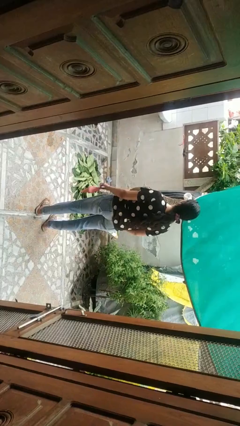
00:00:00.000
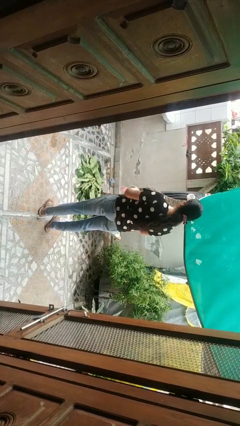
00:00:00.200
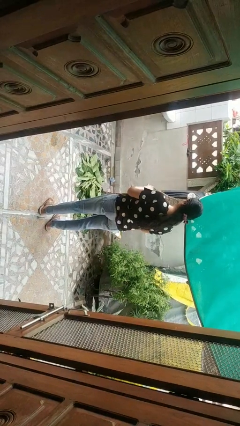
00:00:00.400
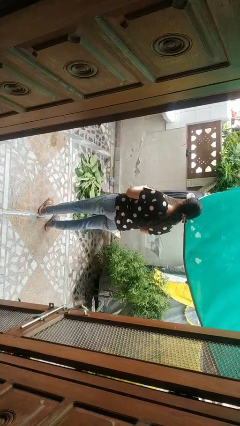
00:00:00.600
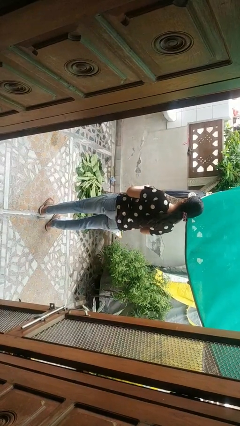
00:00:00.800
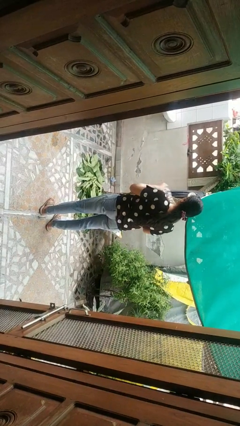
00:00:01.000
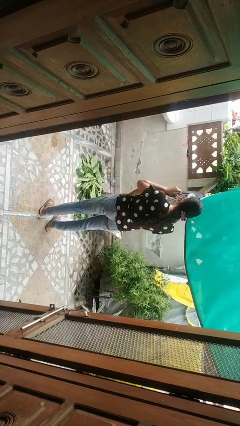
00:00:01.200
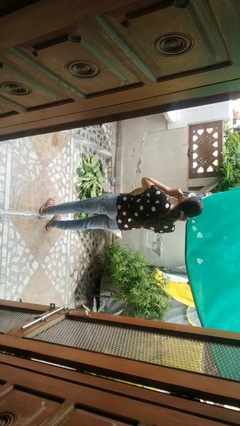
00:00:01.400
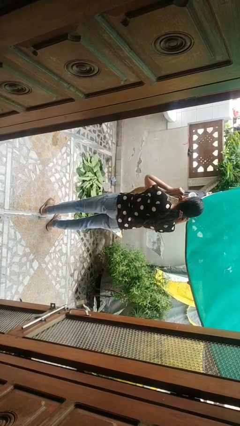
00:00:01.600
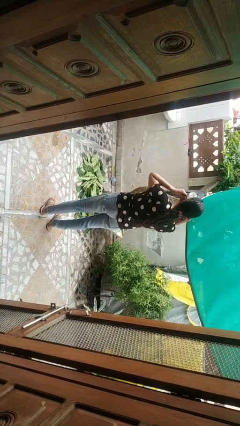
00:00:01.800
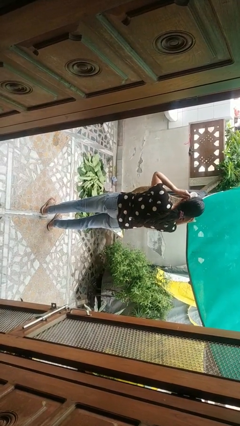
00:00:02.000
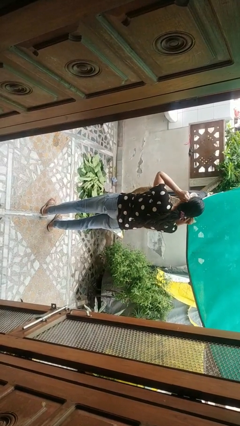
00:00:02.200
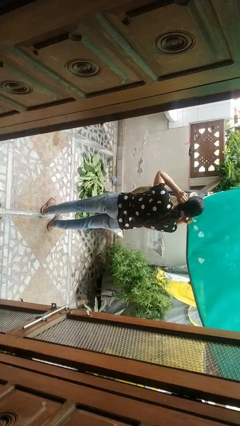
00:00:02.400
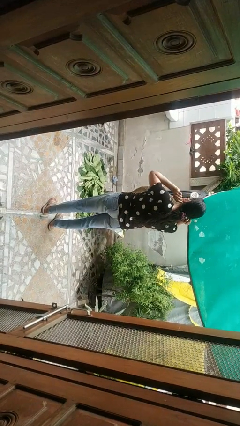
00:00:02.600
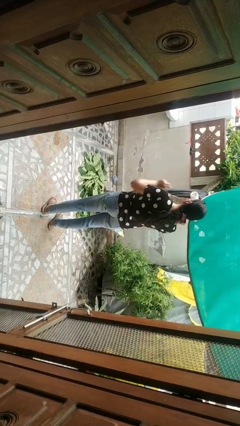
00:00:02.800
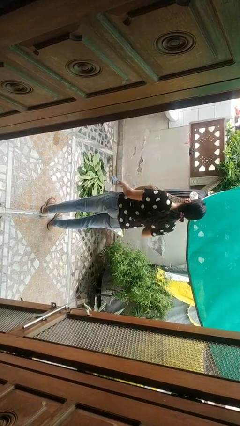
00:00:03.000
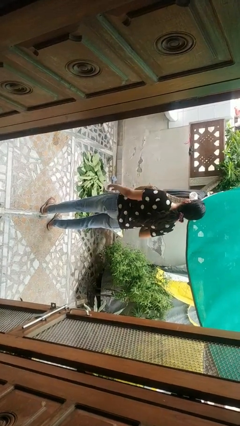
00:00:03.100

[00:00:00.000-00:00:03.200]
person puts on facemask

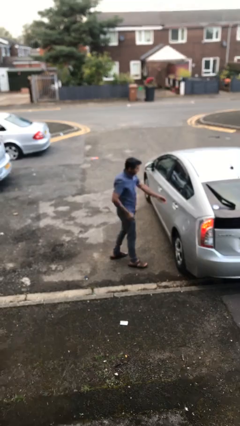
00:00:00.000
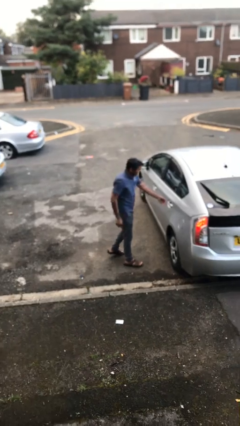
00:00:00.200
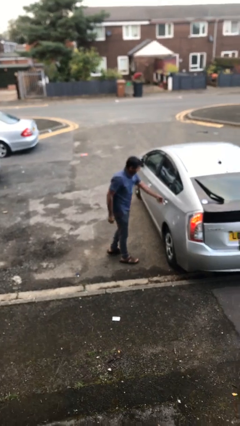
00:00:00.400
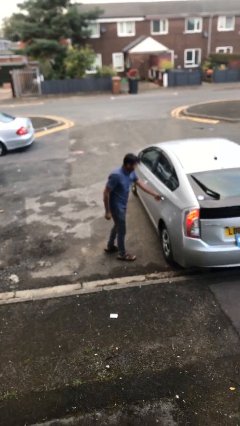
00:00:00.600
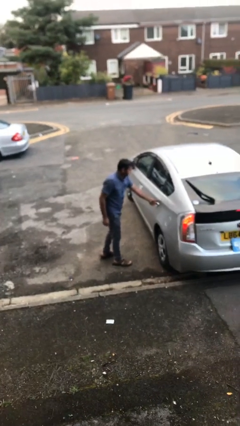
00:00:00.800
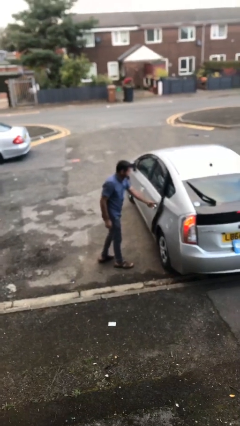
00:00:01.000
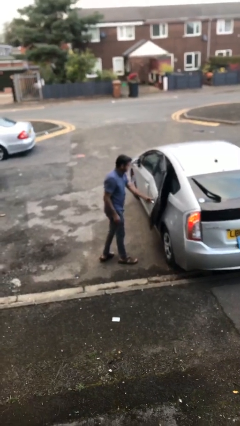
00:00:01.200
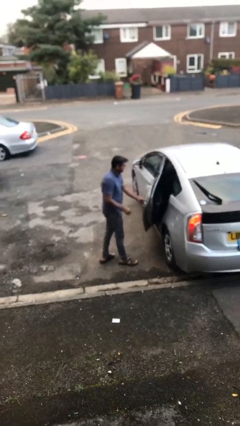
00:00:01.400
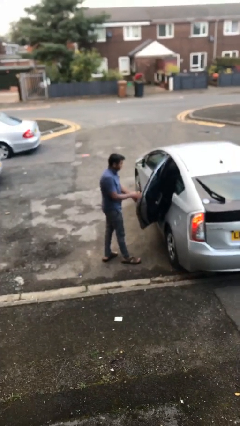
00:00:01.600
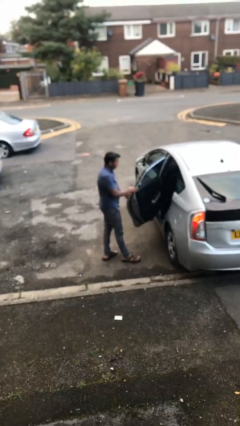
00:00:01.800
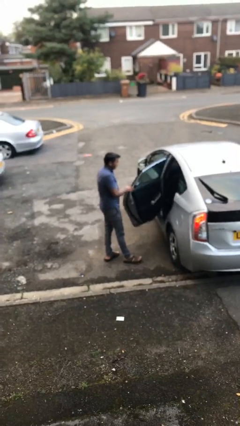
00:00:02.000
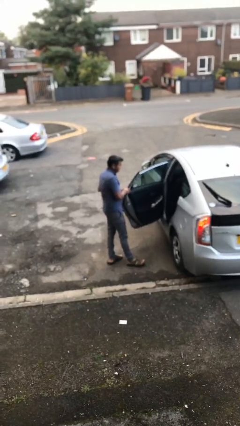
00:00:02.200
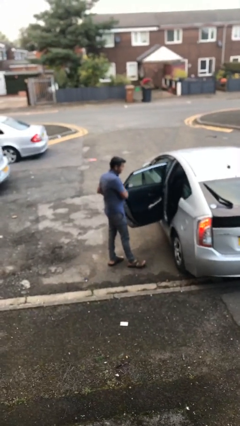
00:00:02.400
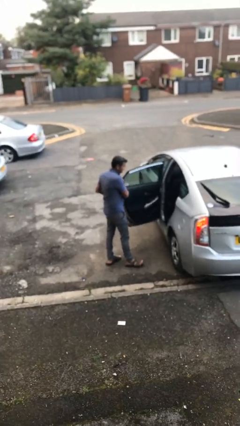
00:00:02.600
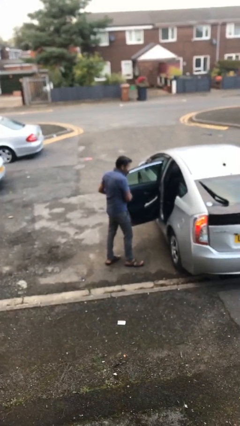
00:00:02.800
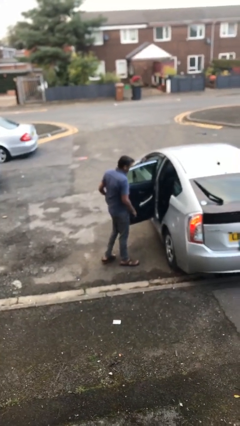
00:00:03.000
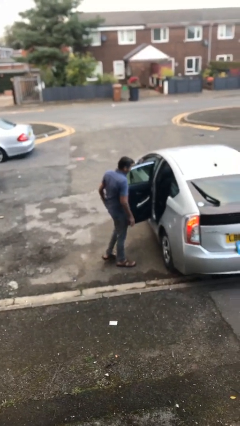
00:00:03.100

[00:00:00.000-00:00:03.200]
person opens car door

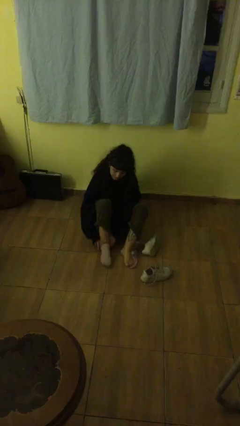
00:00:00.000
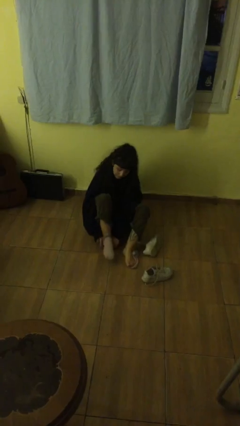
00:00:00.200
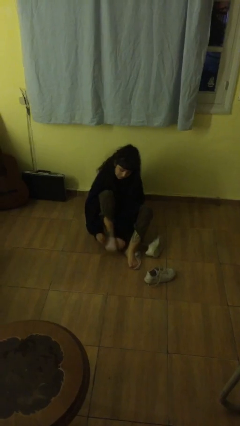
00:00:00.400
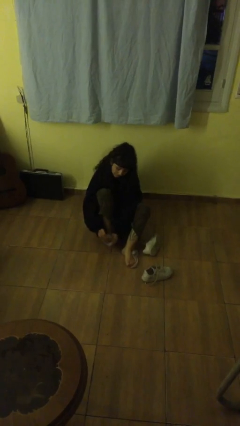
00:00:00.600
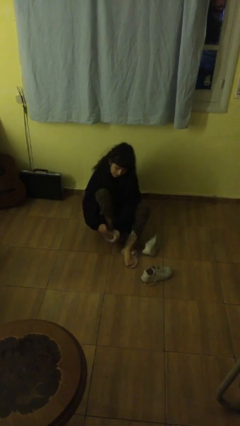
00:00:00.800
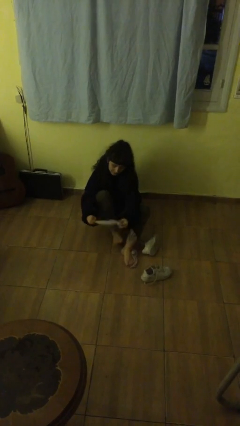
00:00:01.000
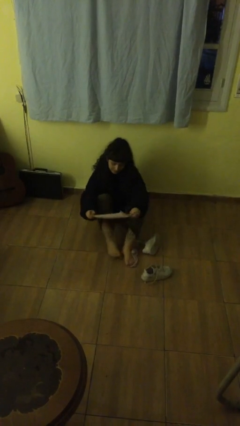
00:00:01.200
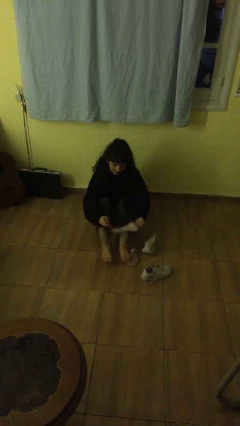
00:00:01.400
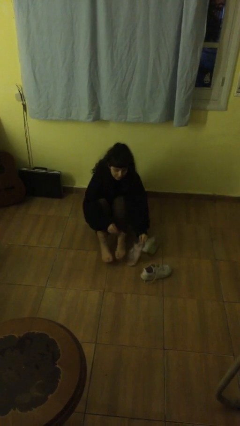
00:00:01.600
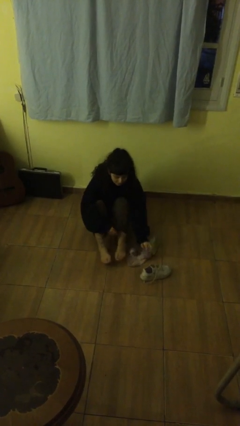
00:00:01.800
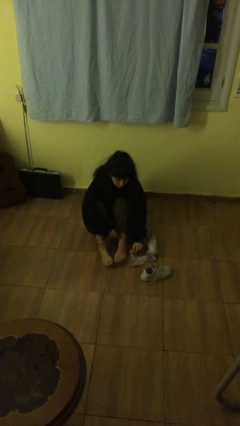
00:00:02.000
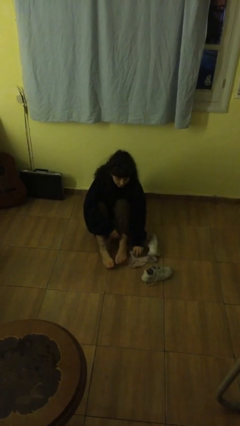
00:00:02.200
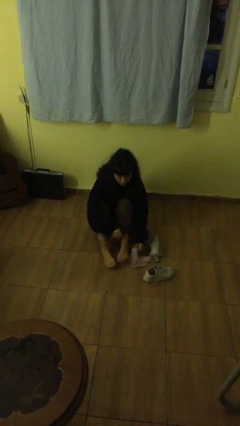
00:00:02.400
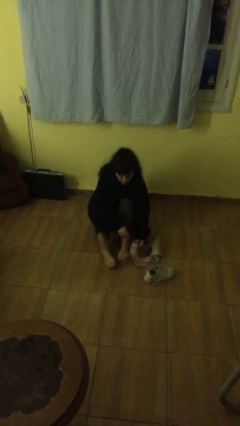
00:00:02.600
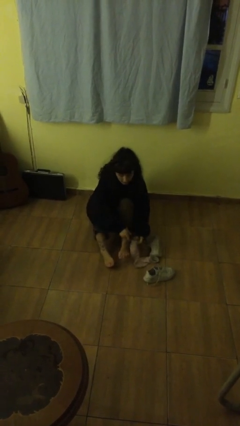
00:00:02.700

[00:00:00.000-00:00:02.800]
person takes off socks

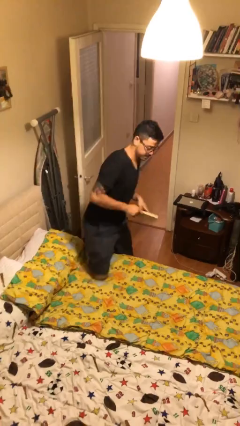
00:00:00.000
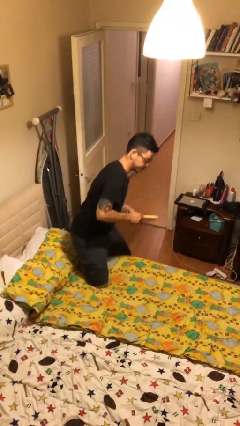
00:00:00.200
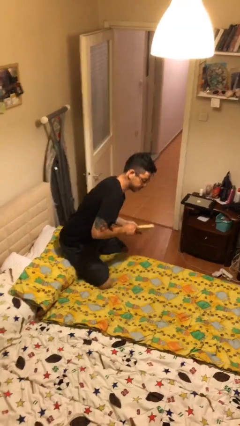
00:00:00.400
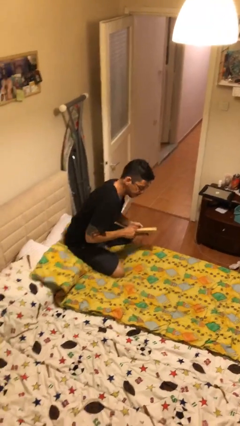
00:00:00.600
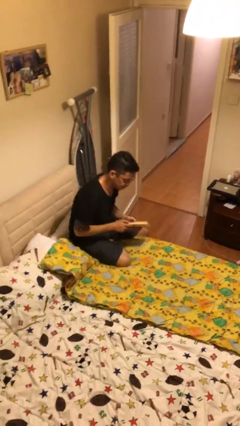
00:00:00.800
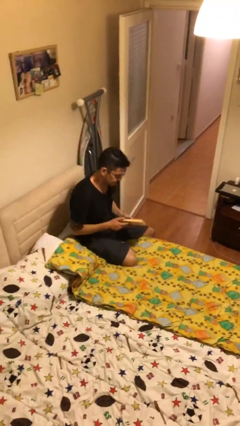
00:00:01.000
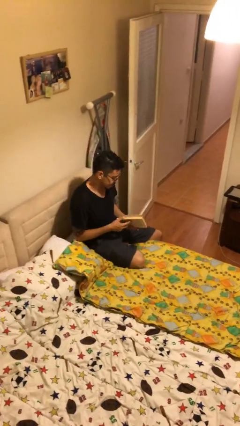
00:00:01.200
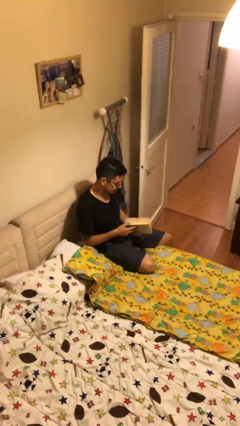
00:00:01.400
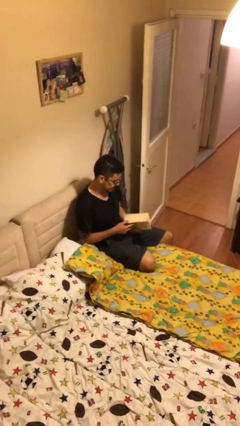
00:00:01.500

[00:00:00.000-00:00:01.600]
person sits down

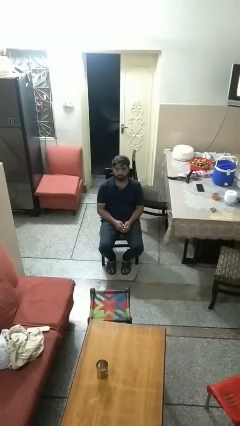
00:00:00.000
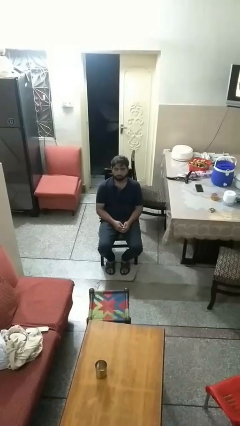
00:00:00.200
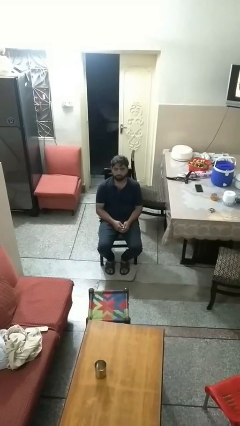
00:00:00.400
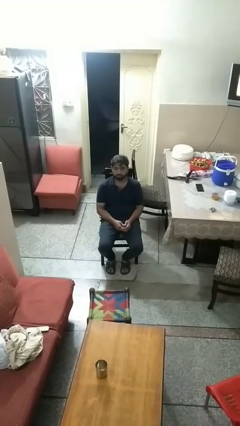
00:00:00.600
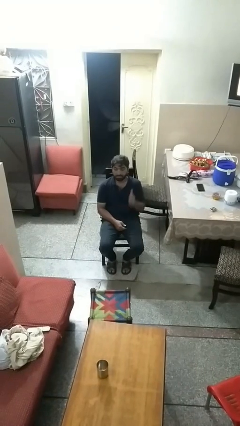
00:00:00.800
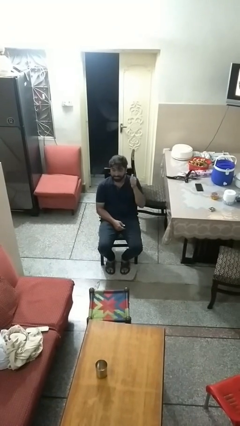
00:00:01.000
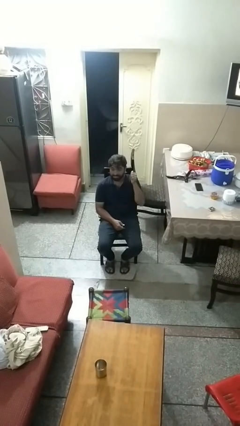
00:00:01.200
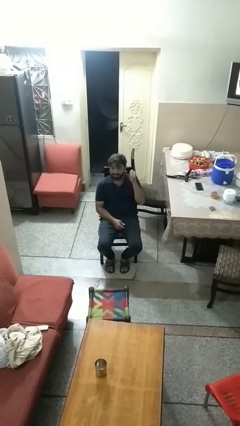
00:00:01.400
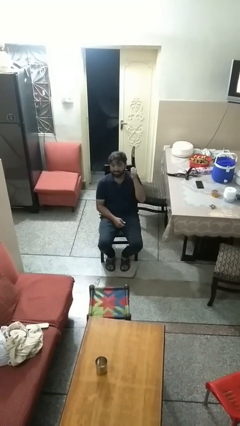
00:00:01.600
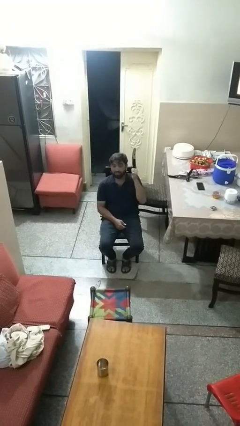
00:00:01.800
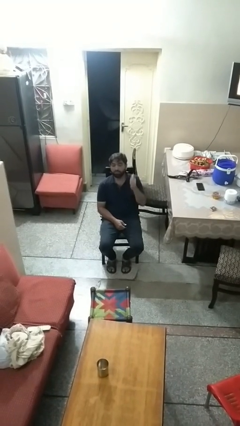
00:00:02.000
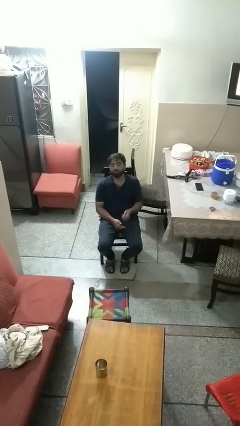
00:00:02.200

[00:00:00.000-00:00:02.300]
person gestures behind me

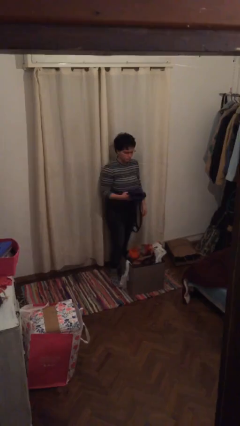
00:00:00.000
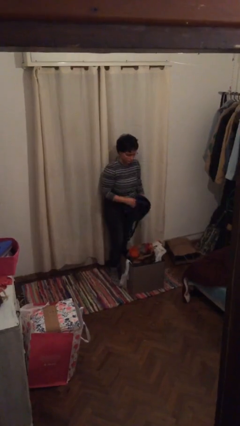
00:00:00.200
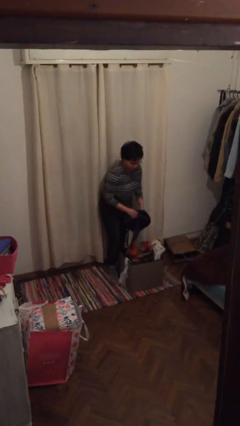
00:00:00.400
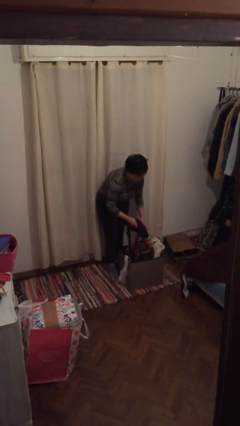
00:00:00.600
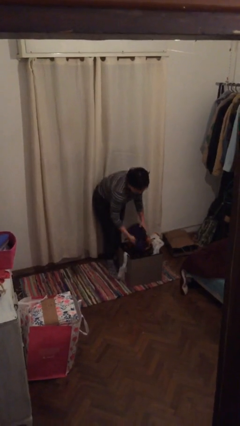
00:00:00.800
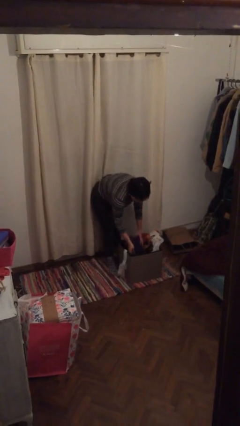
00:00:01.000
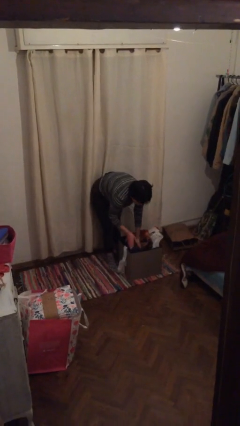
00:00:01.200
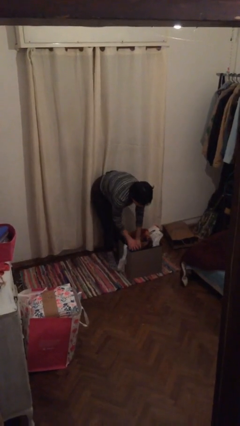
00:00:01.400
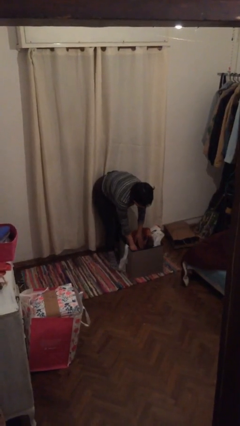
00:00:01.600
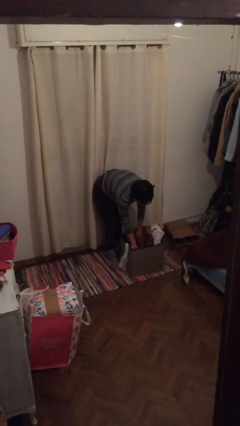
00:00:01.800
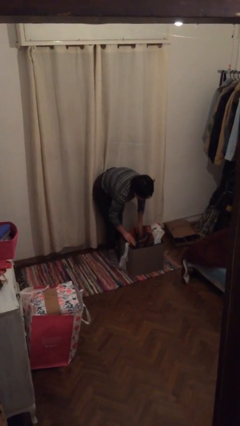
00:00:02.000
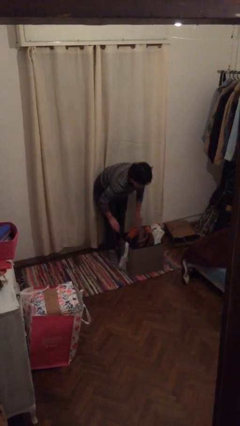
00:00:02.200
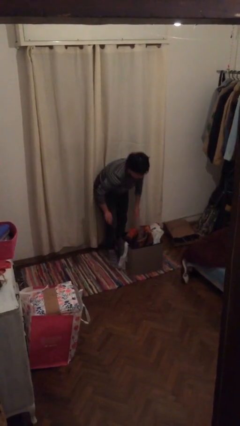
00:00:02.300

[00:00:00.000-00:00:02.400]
person puts object into basket

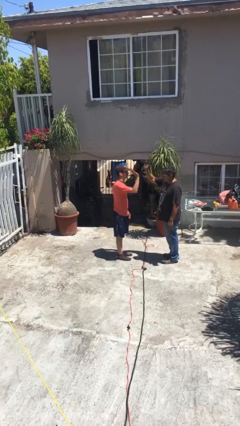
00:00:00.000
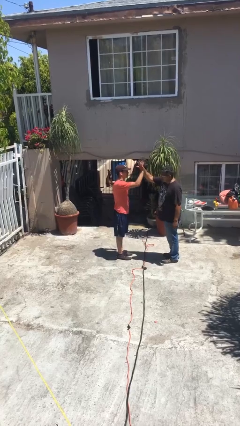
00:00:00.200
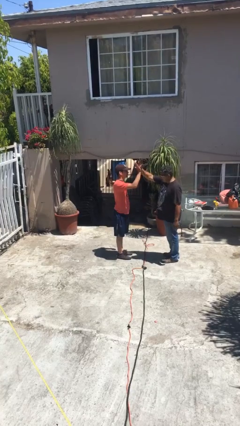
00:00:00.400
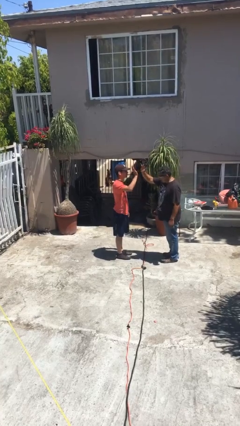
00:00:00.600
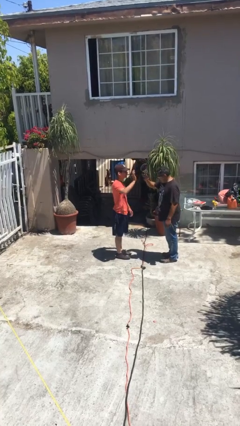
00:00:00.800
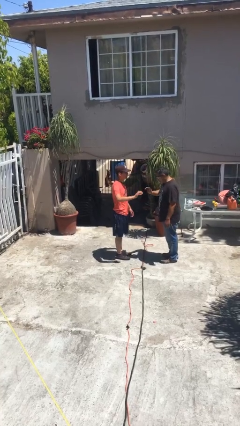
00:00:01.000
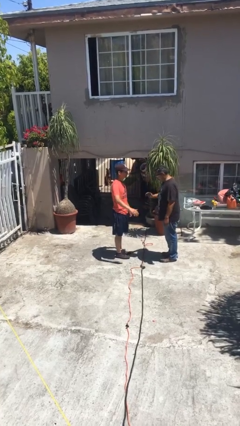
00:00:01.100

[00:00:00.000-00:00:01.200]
person highfives hand
